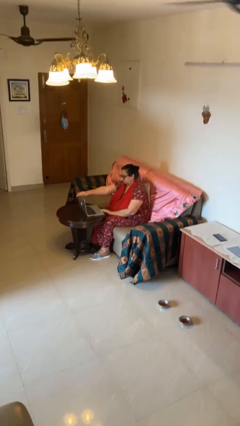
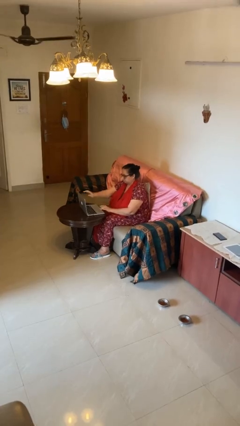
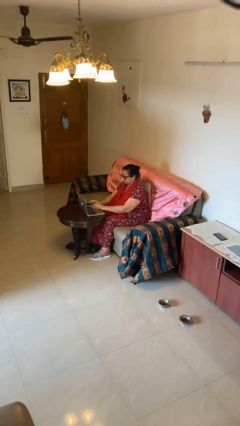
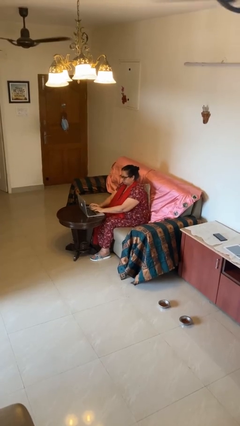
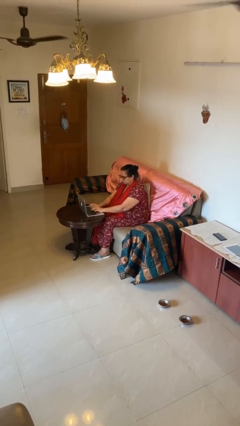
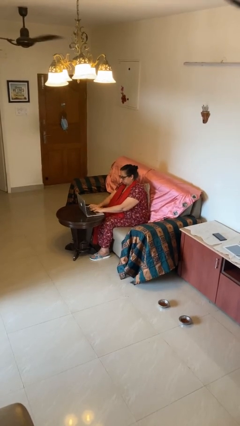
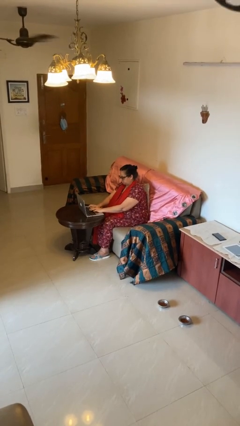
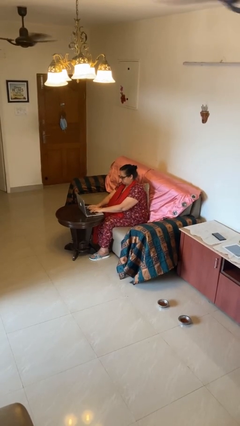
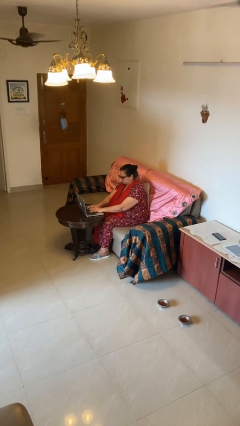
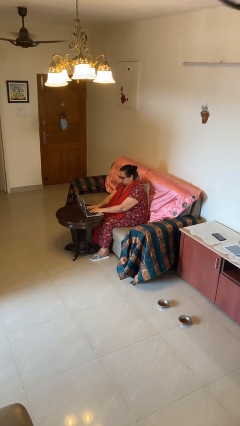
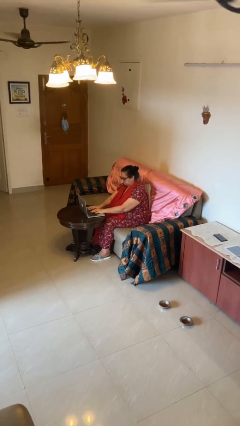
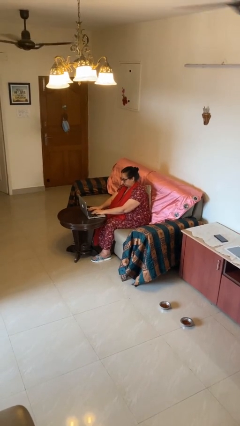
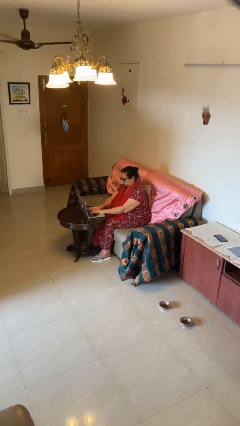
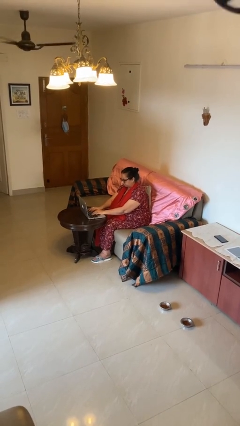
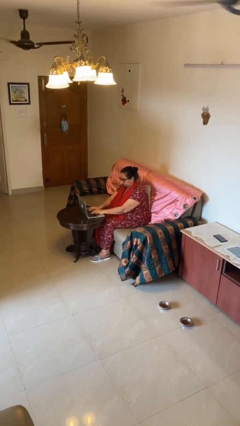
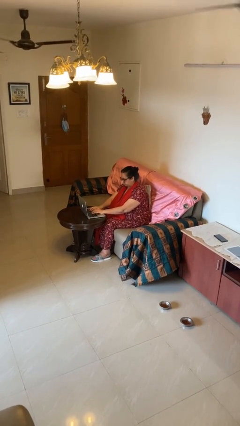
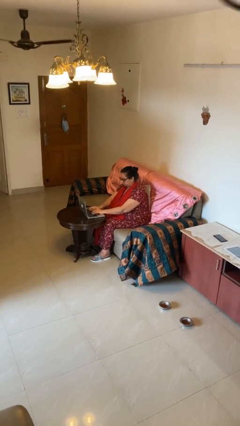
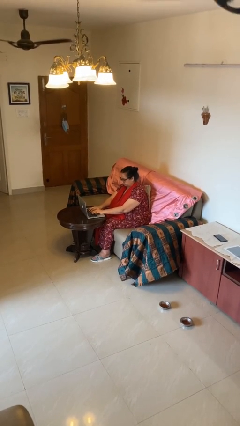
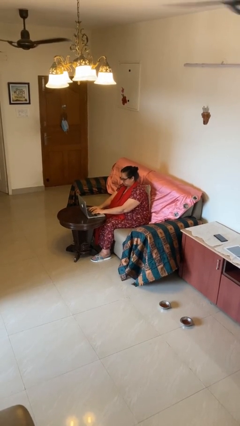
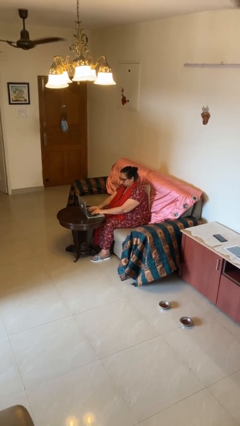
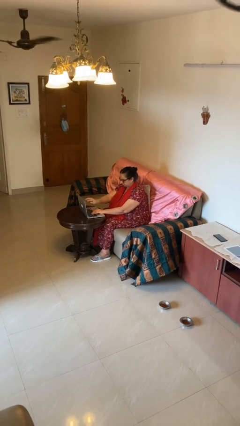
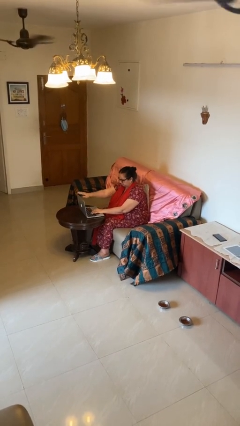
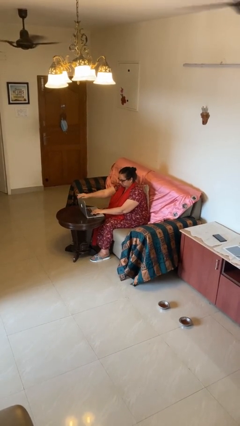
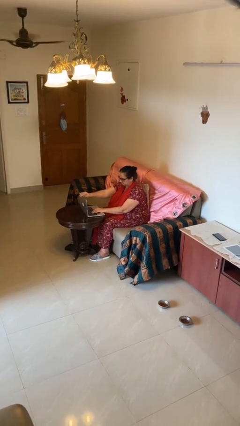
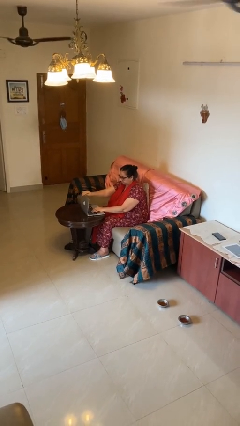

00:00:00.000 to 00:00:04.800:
person interacts with laptop

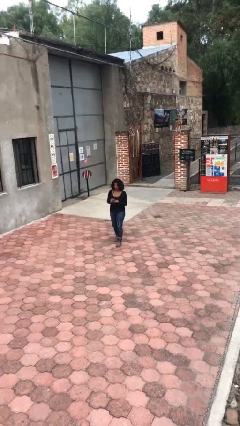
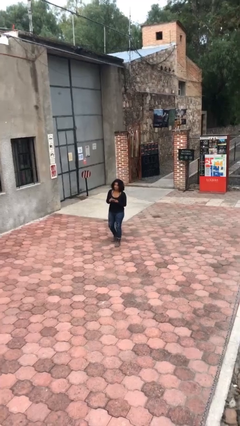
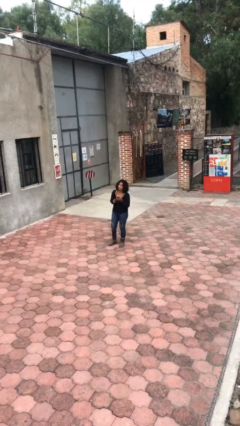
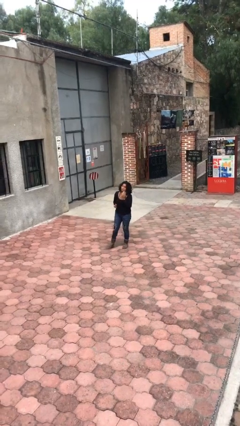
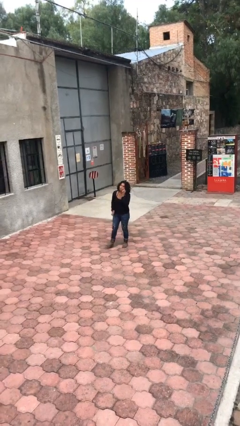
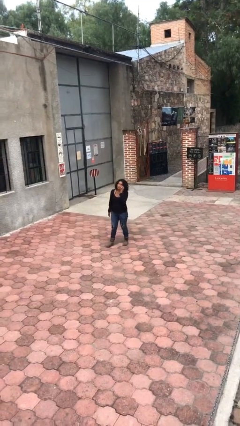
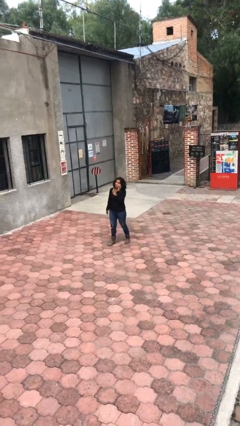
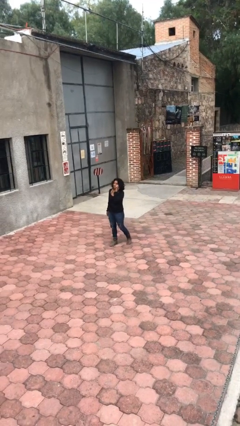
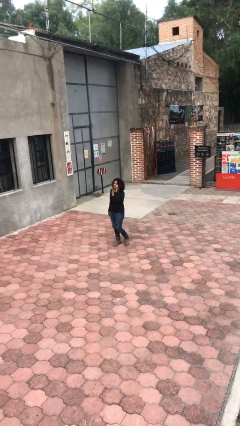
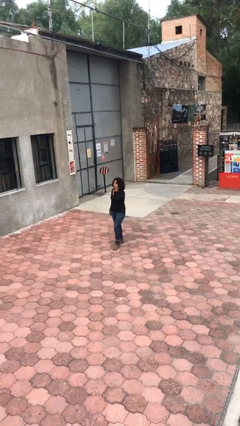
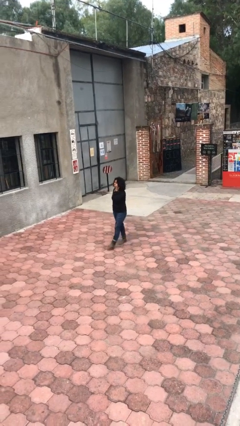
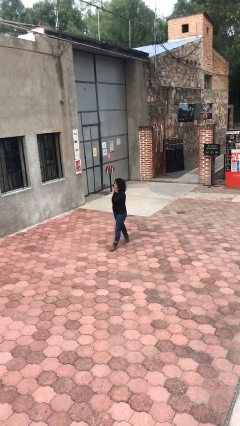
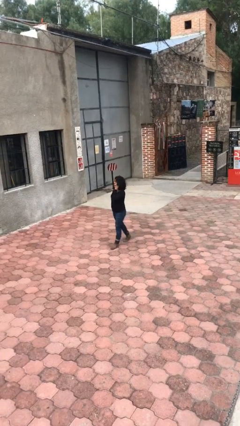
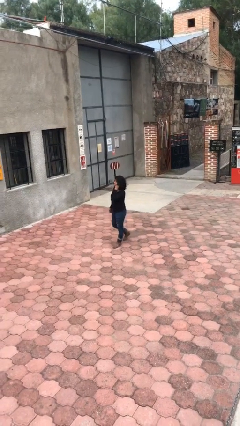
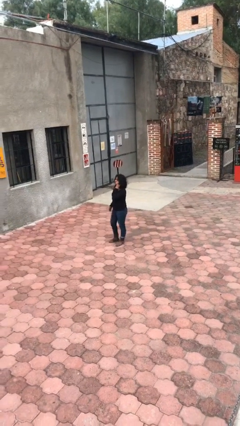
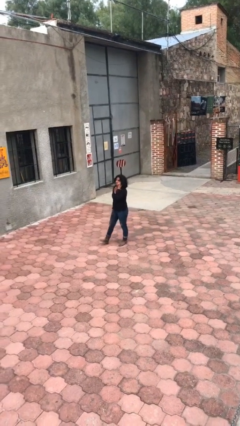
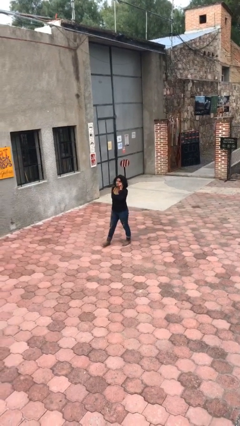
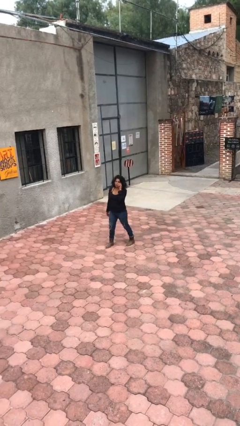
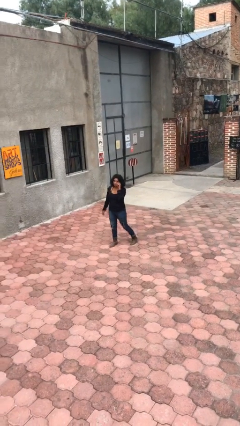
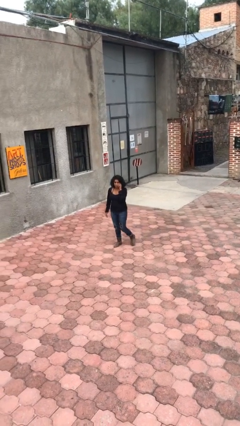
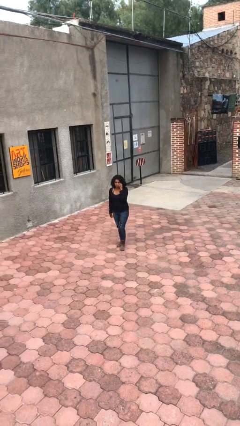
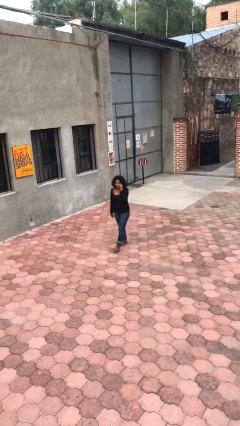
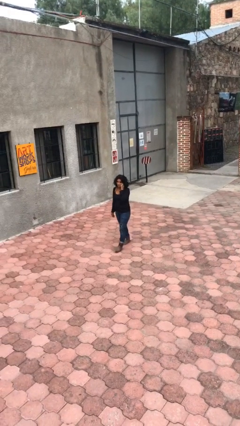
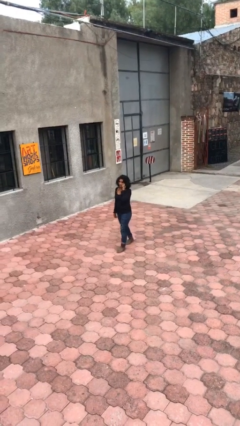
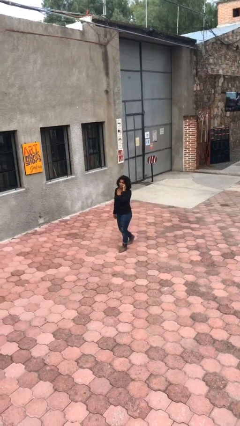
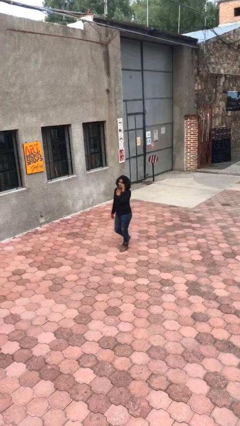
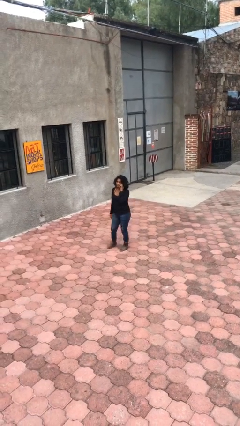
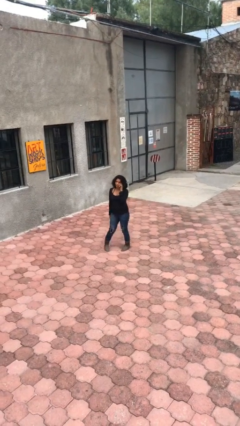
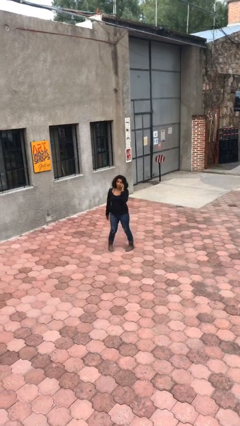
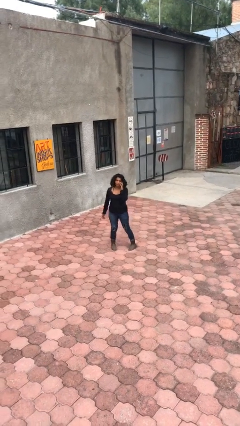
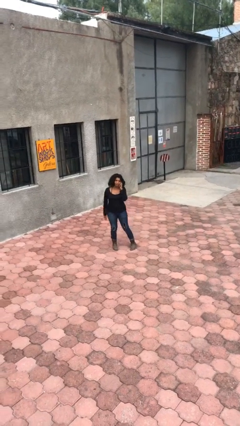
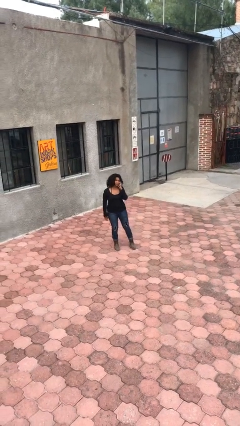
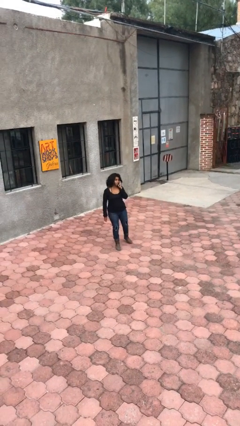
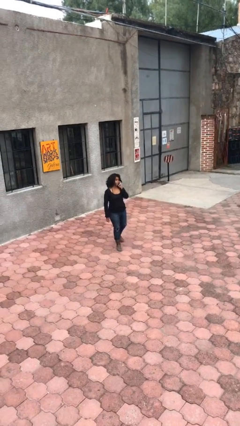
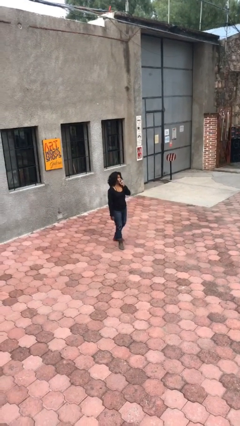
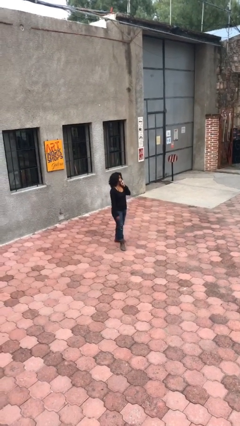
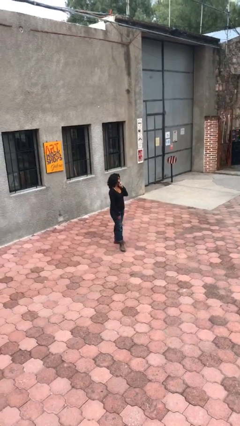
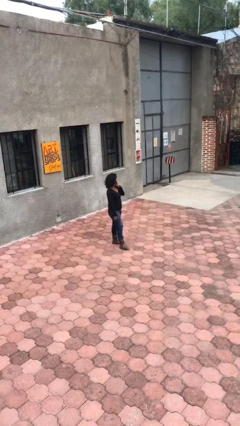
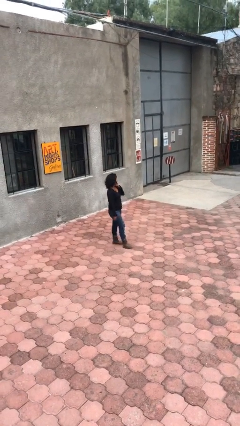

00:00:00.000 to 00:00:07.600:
person talks on phone

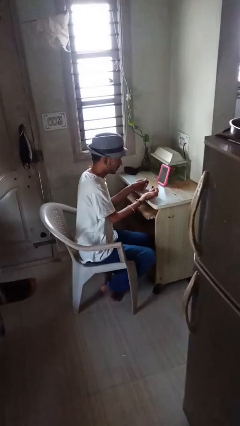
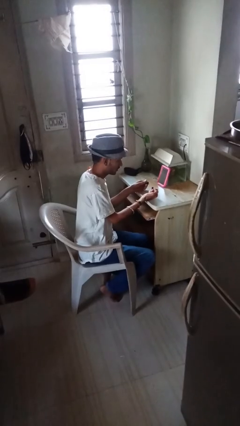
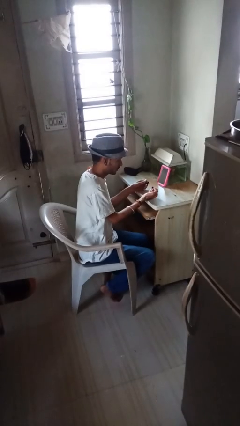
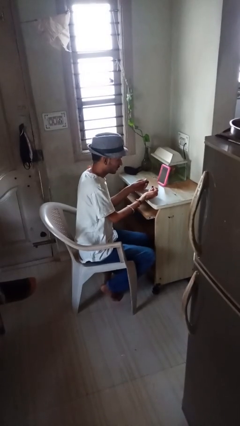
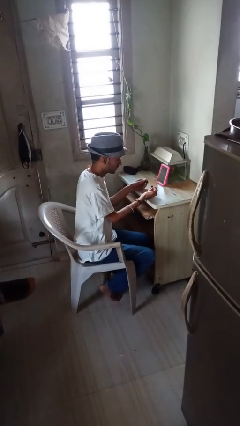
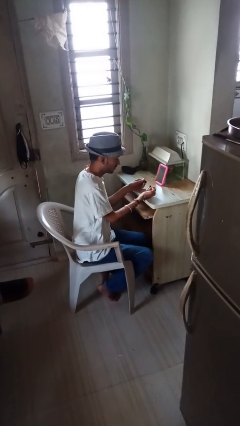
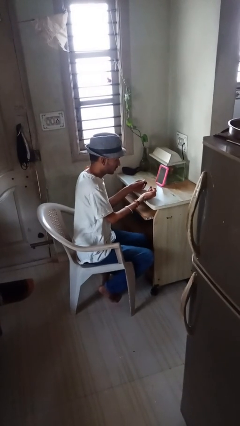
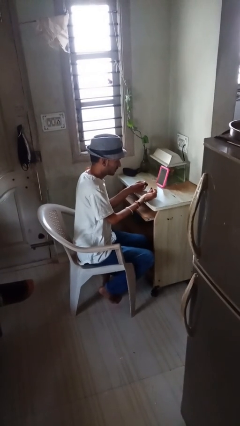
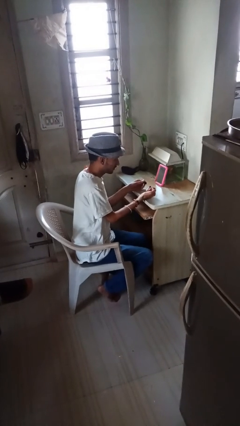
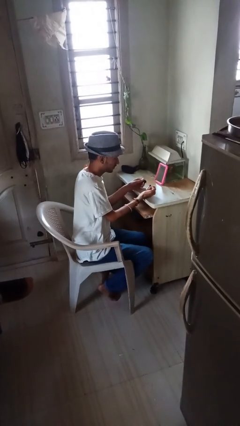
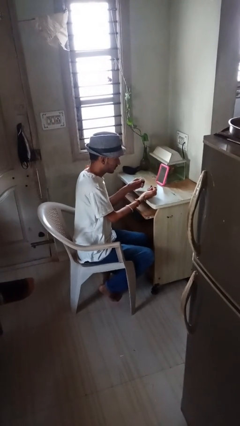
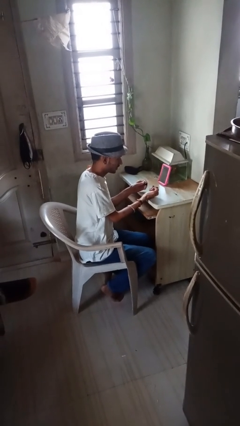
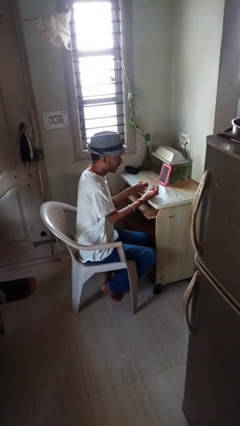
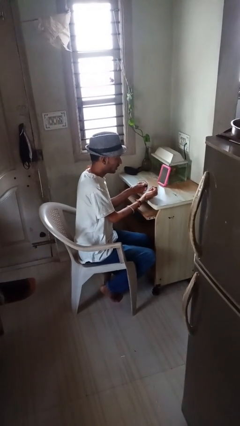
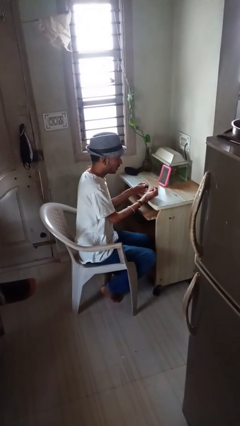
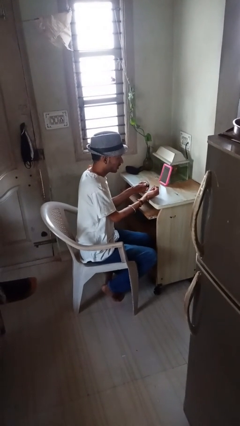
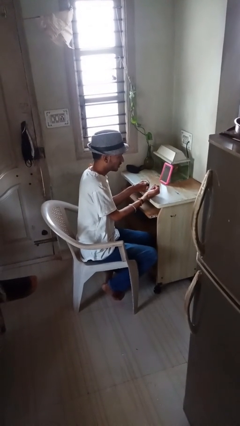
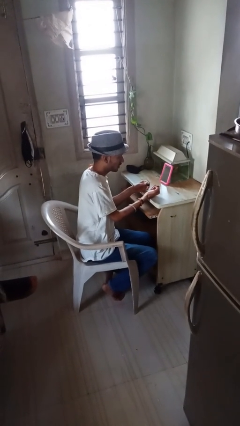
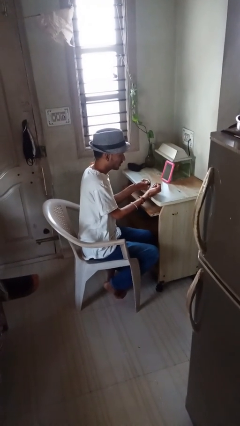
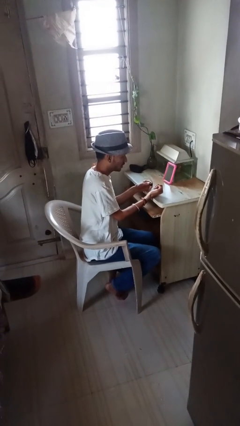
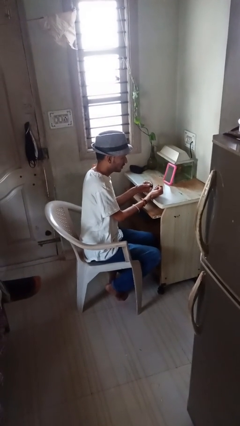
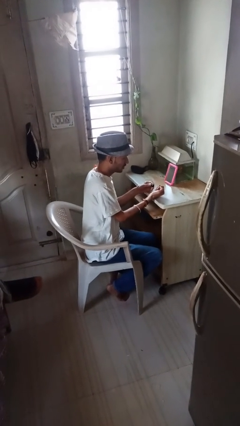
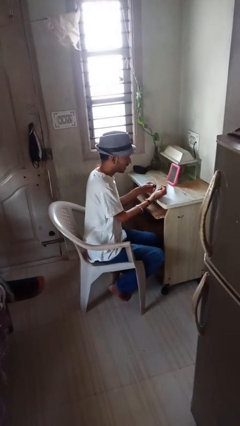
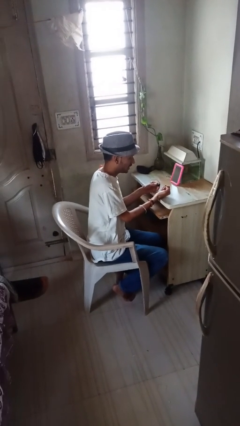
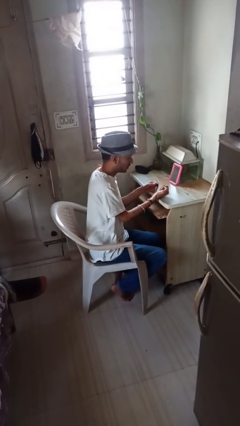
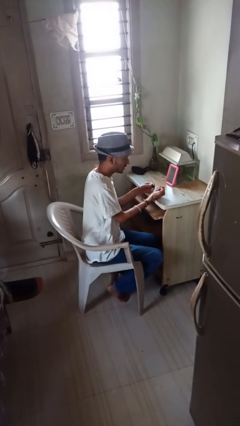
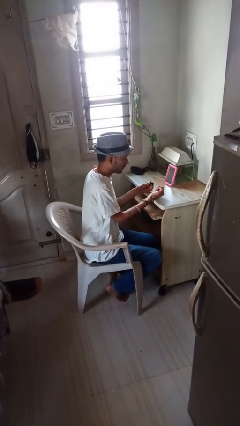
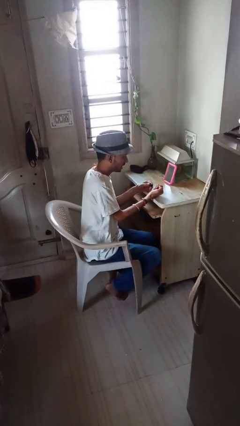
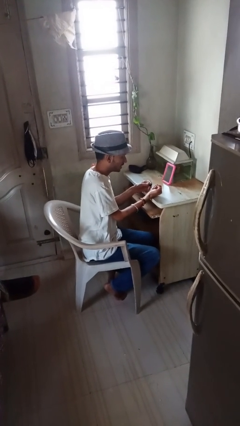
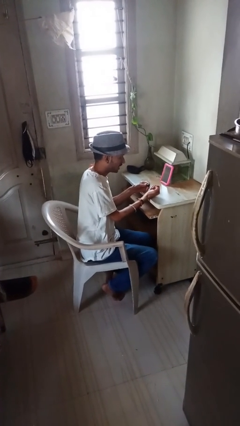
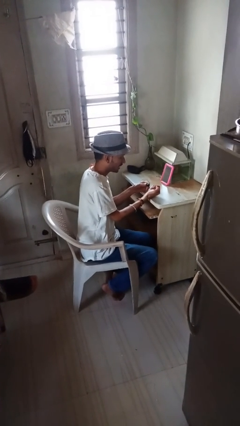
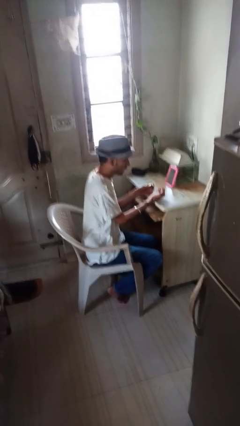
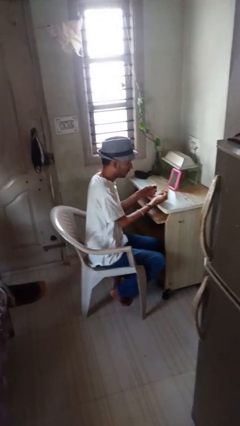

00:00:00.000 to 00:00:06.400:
person paints fingernails
